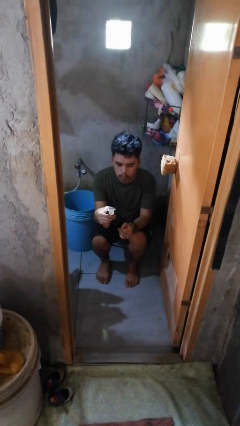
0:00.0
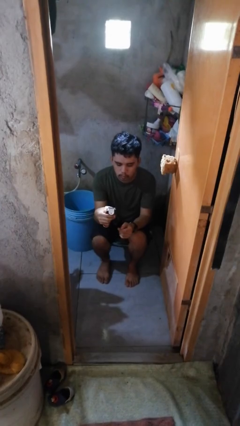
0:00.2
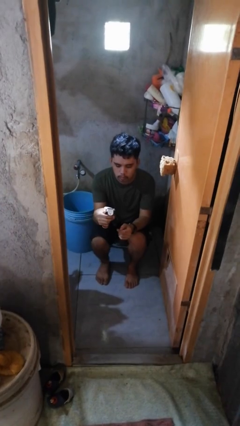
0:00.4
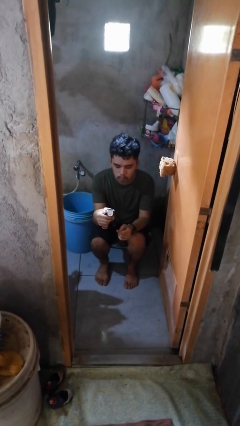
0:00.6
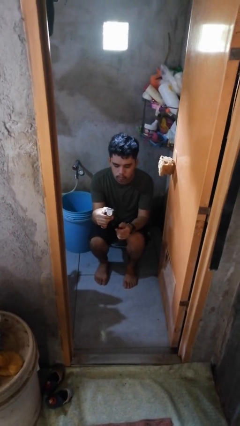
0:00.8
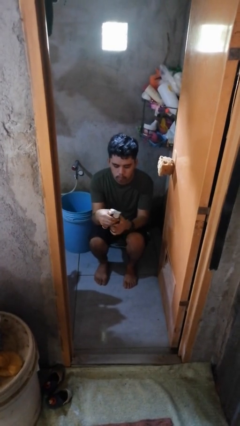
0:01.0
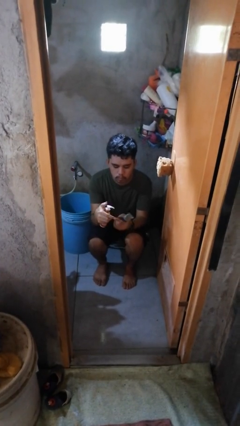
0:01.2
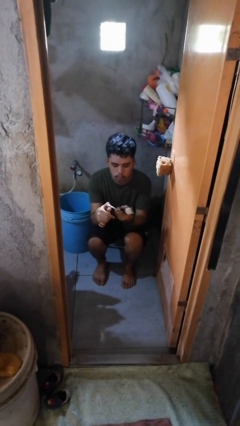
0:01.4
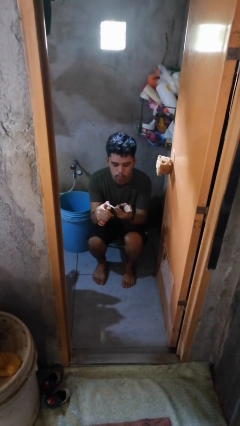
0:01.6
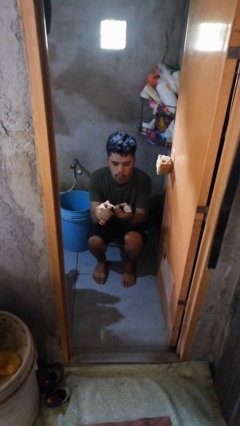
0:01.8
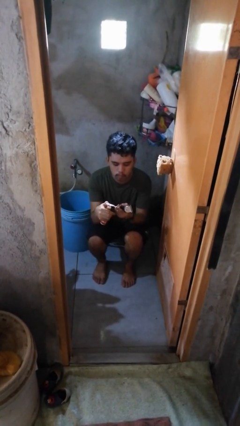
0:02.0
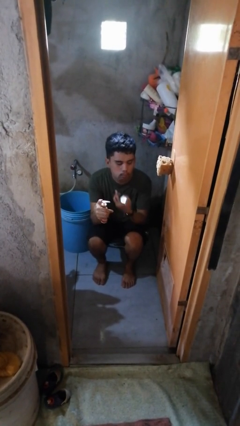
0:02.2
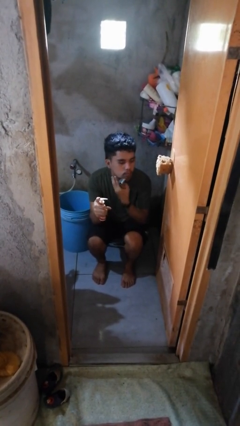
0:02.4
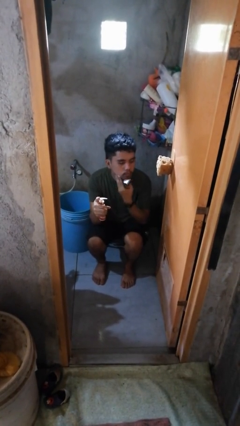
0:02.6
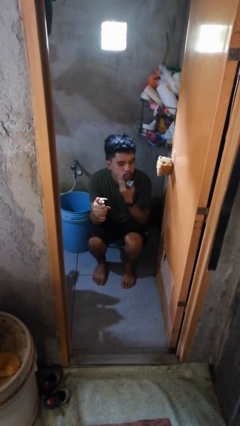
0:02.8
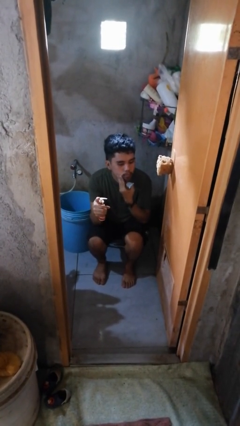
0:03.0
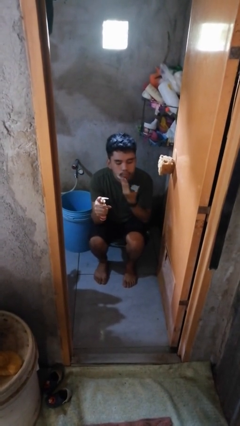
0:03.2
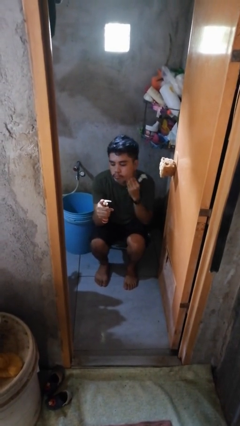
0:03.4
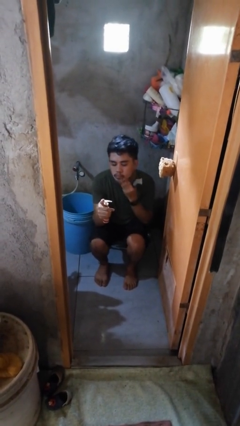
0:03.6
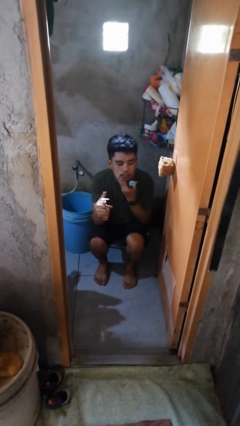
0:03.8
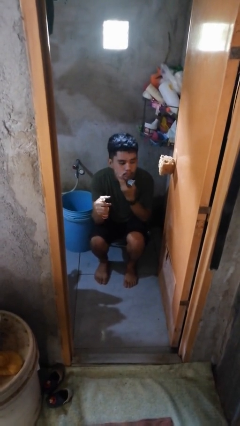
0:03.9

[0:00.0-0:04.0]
person applies shaving cream

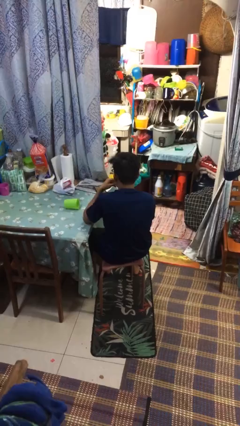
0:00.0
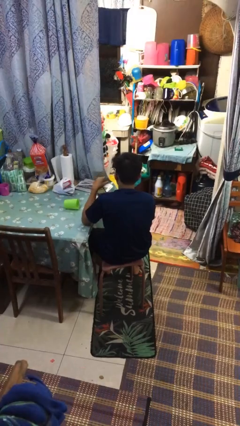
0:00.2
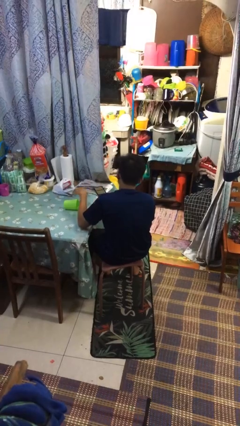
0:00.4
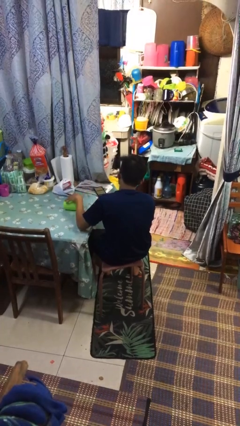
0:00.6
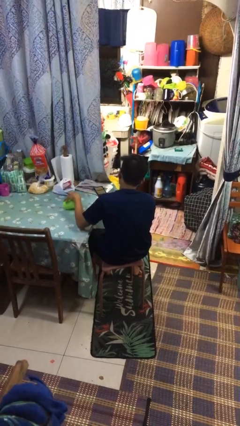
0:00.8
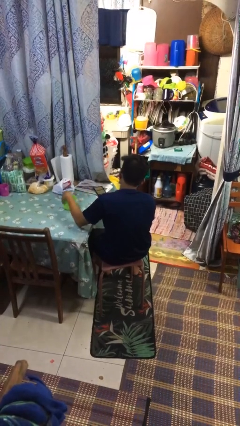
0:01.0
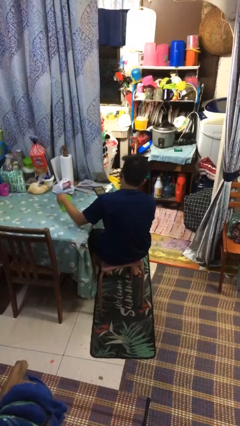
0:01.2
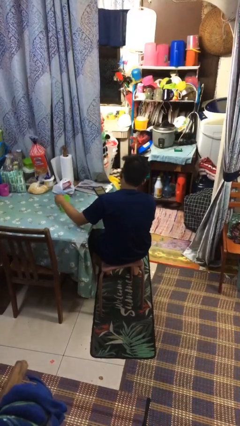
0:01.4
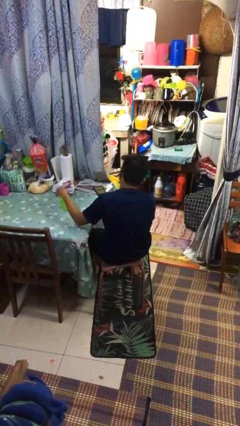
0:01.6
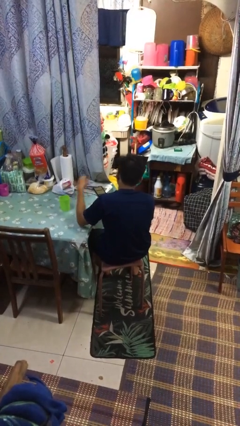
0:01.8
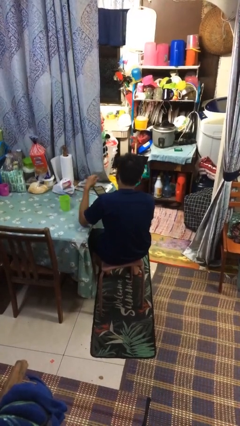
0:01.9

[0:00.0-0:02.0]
person sets upright glass

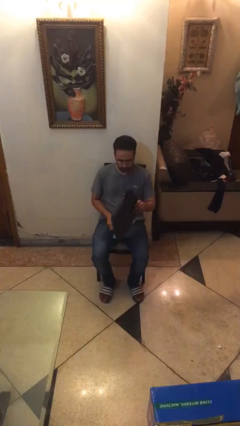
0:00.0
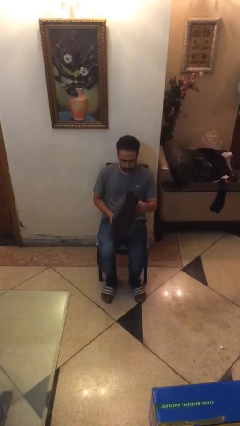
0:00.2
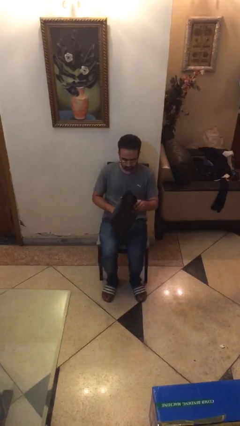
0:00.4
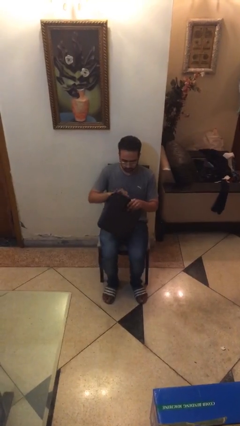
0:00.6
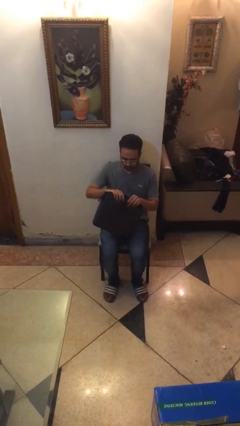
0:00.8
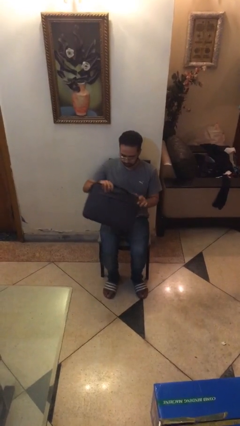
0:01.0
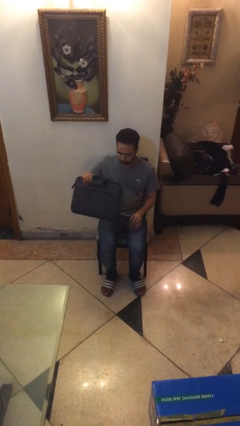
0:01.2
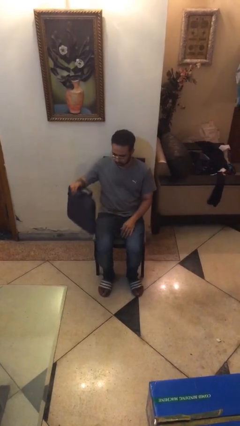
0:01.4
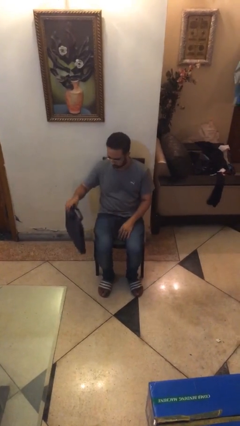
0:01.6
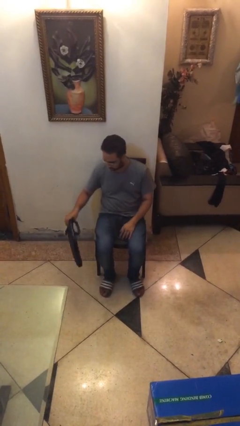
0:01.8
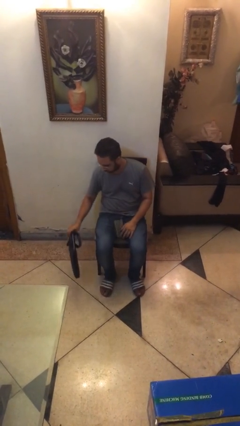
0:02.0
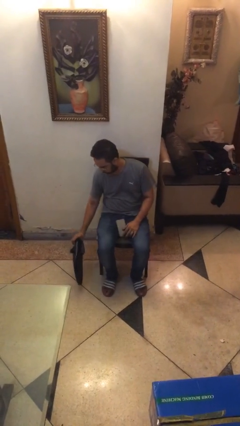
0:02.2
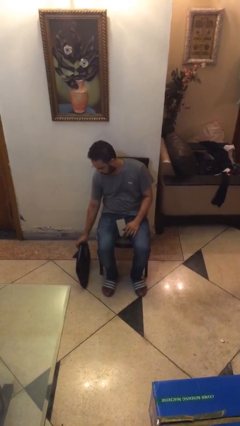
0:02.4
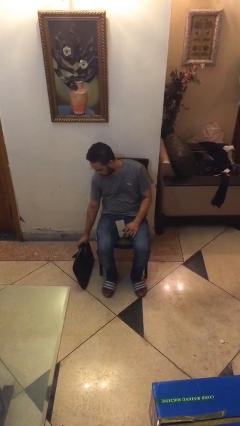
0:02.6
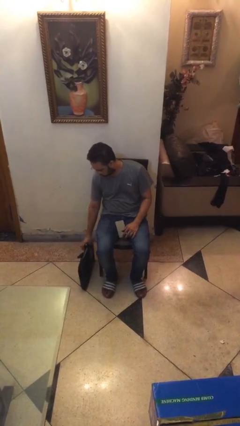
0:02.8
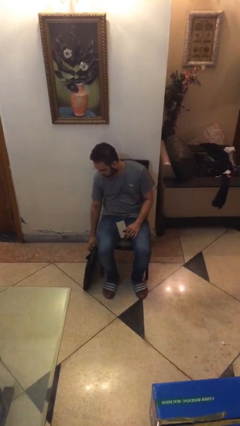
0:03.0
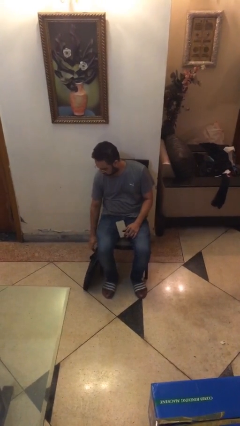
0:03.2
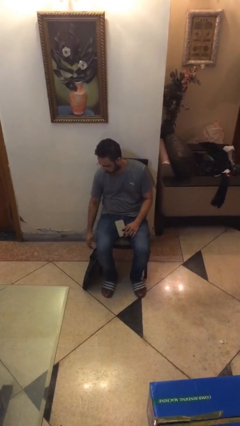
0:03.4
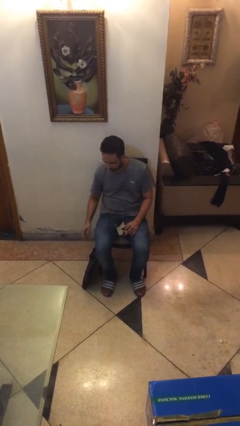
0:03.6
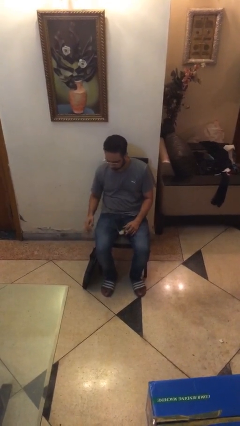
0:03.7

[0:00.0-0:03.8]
person puts down object on floor

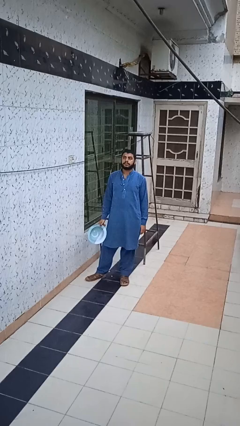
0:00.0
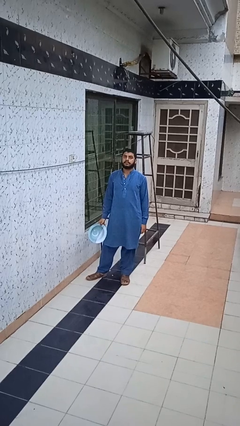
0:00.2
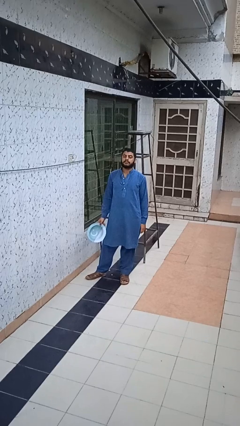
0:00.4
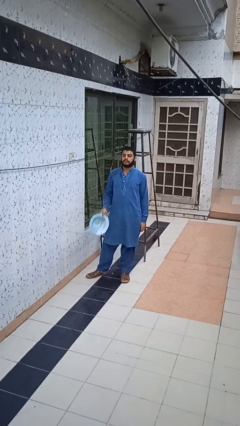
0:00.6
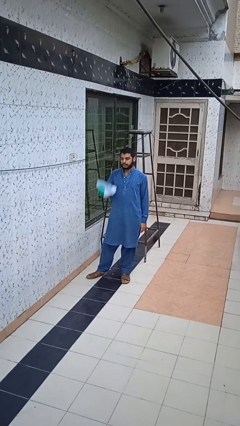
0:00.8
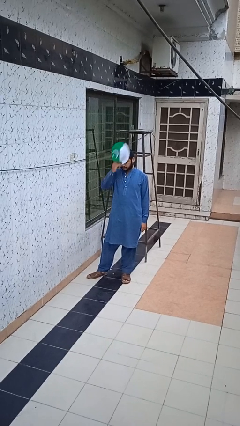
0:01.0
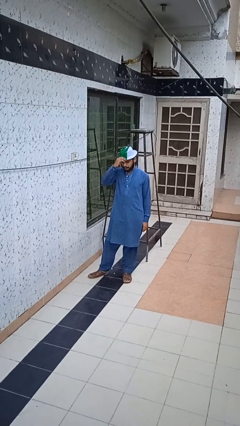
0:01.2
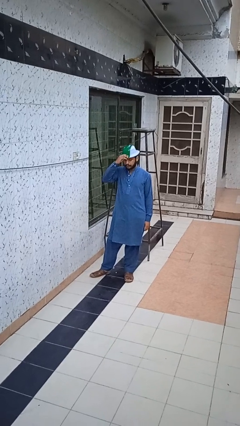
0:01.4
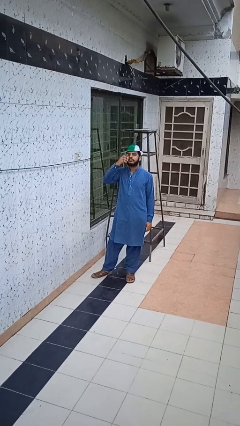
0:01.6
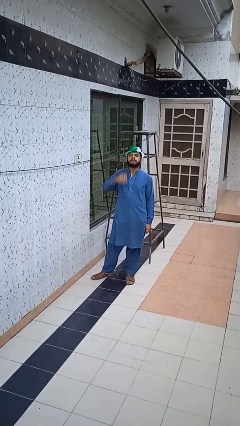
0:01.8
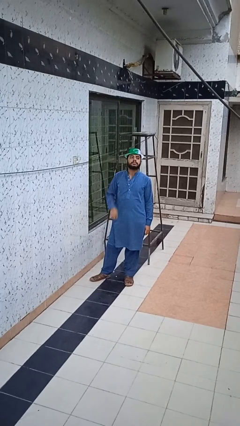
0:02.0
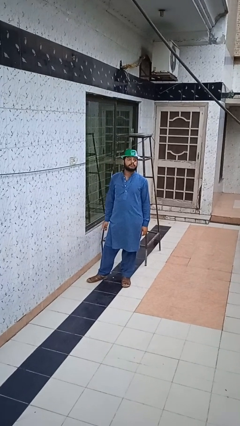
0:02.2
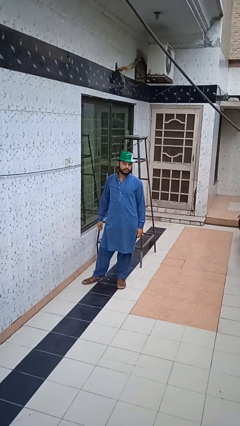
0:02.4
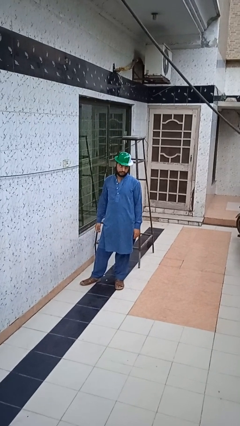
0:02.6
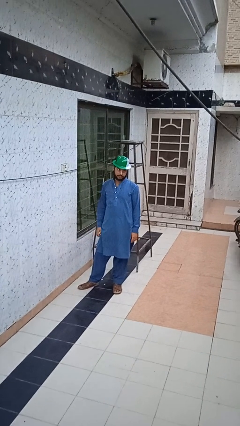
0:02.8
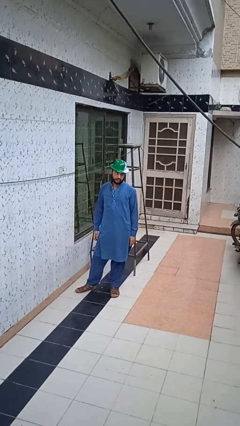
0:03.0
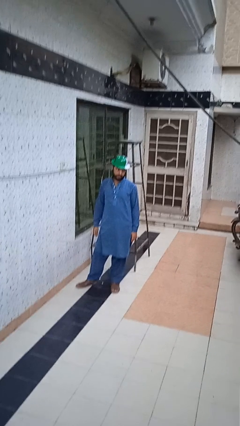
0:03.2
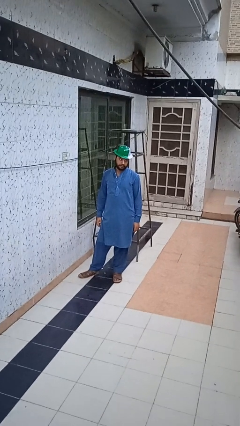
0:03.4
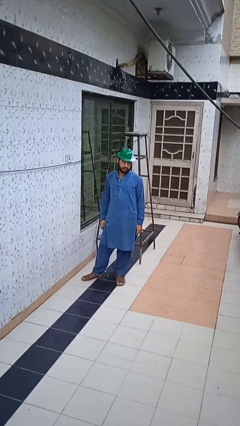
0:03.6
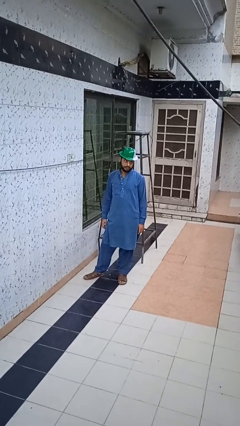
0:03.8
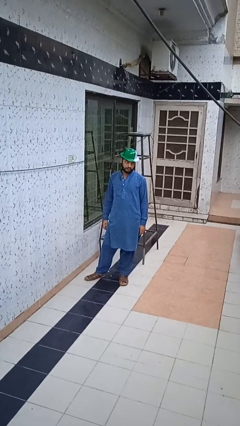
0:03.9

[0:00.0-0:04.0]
person puts on hat

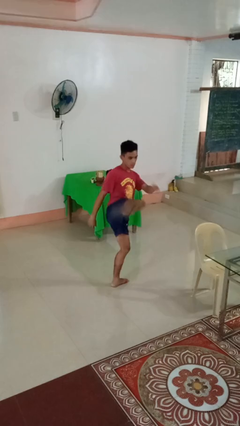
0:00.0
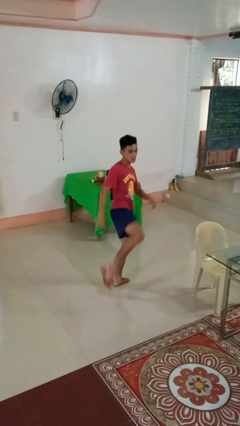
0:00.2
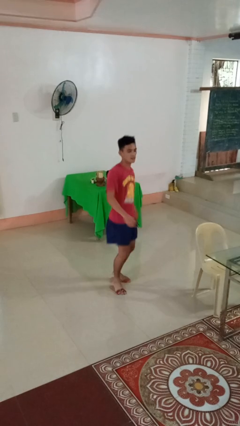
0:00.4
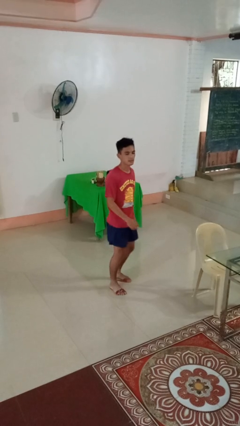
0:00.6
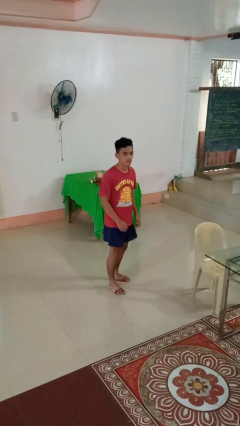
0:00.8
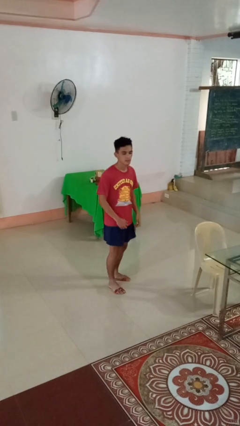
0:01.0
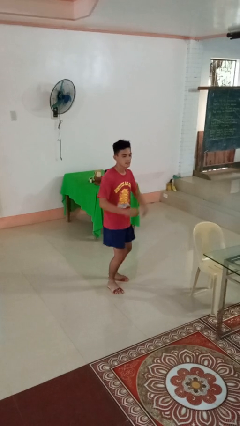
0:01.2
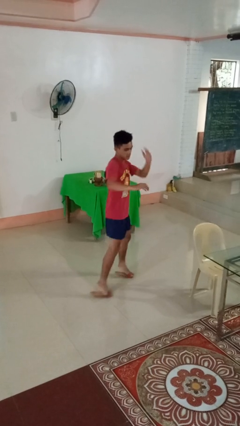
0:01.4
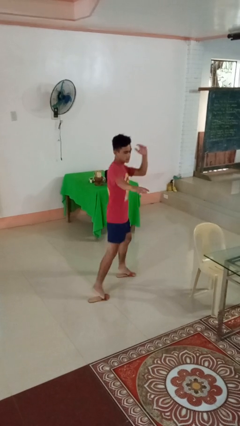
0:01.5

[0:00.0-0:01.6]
person karate kicks

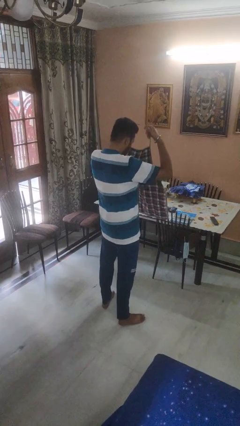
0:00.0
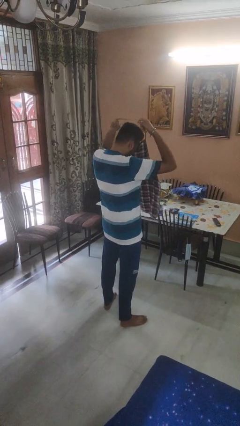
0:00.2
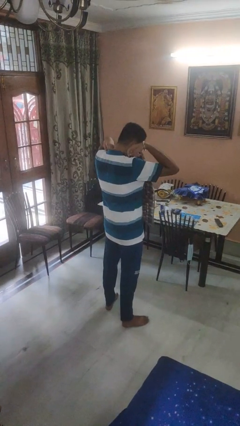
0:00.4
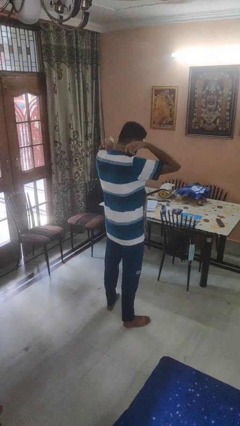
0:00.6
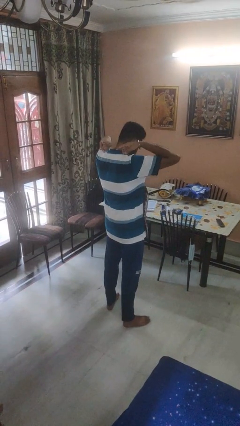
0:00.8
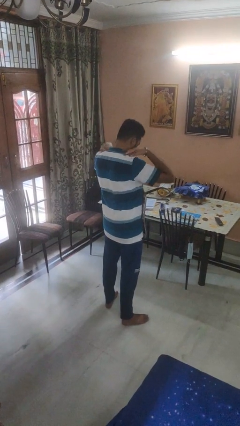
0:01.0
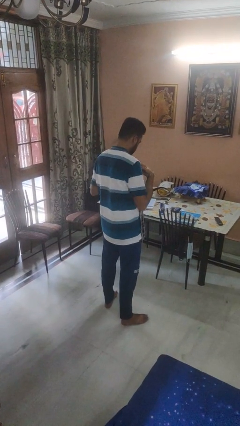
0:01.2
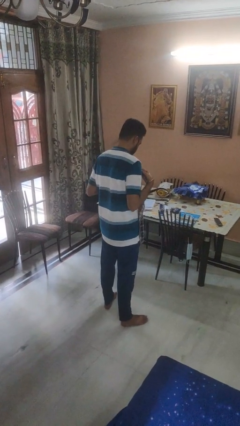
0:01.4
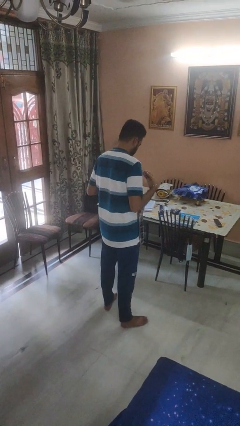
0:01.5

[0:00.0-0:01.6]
person puts on apron

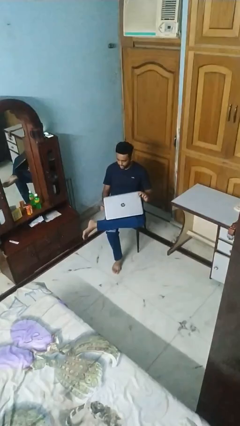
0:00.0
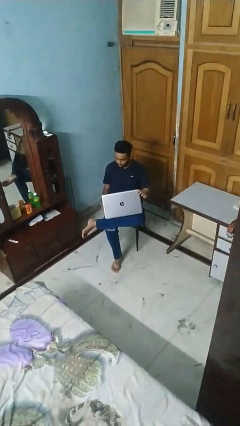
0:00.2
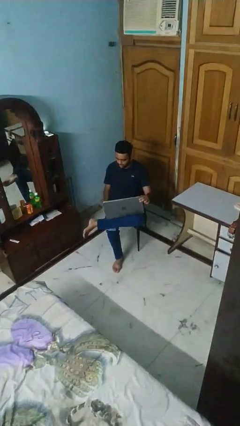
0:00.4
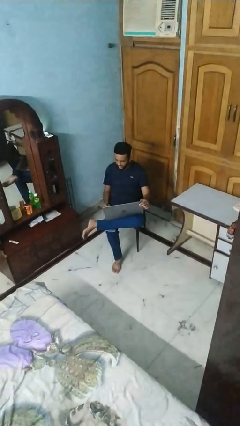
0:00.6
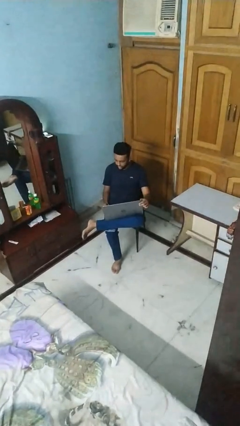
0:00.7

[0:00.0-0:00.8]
person opens laptop
